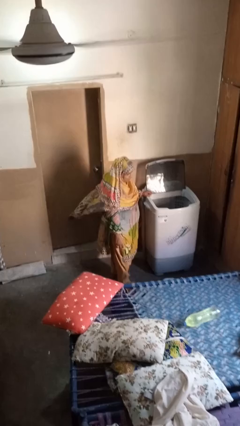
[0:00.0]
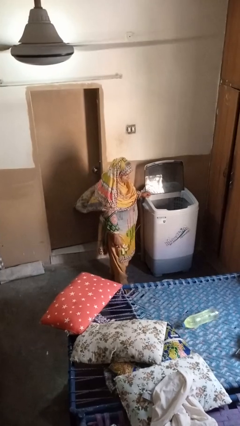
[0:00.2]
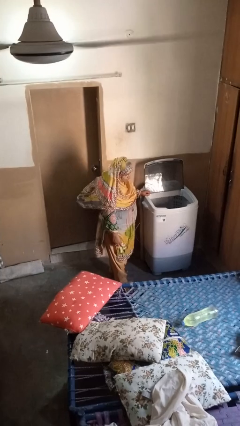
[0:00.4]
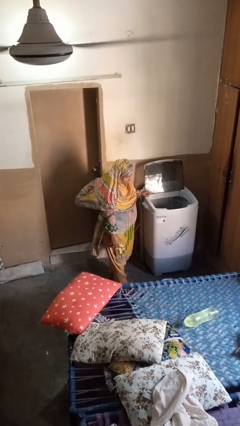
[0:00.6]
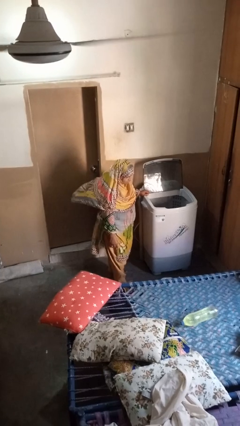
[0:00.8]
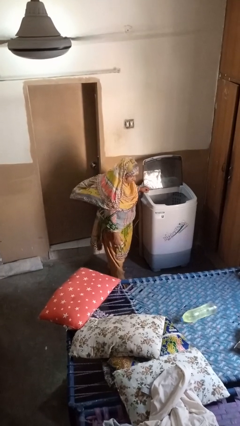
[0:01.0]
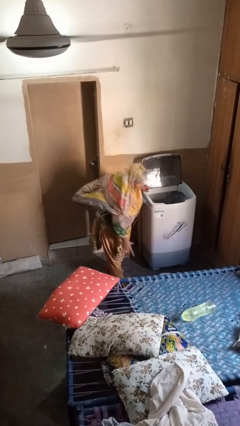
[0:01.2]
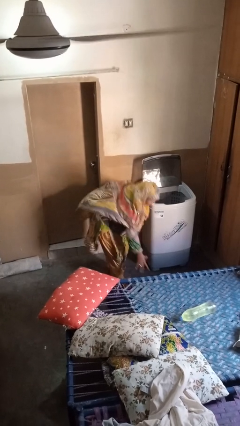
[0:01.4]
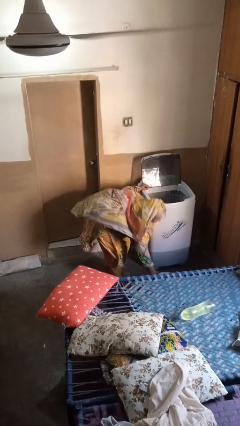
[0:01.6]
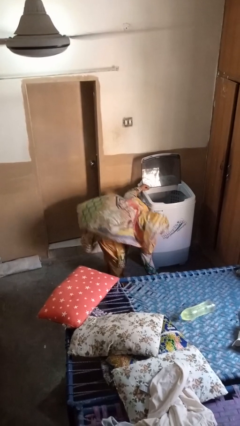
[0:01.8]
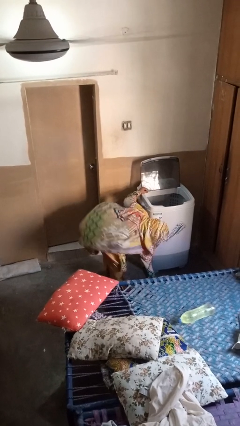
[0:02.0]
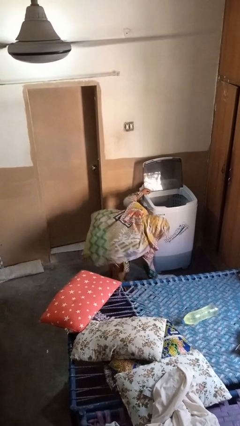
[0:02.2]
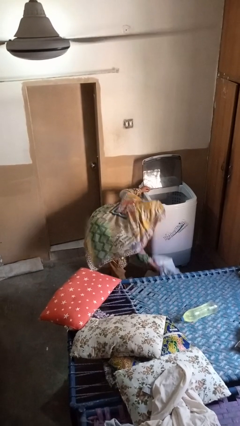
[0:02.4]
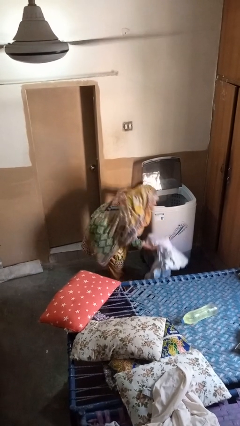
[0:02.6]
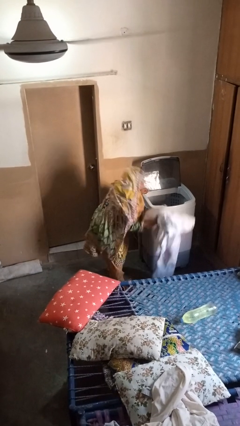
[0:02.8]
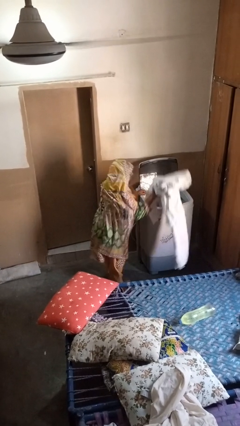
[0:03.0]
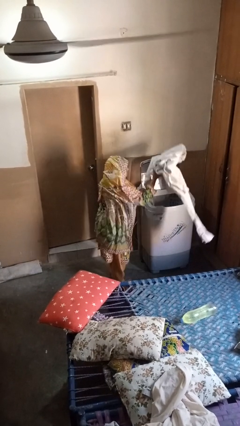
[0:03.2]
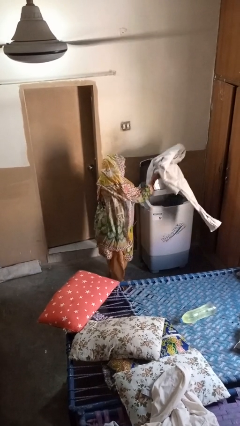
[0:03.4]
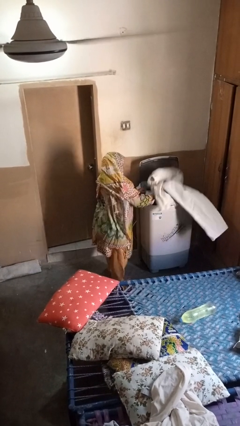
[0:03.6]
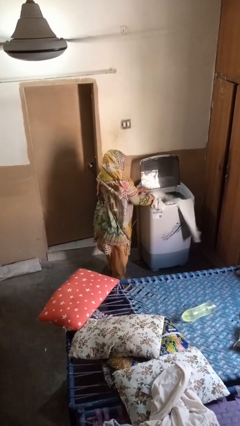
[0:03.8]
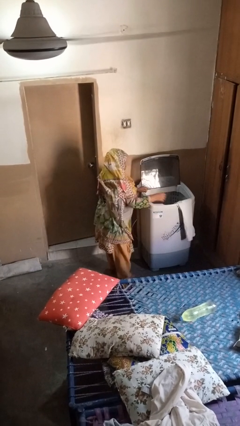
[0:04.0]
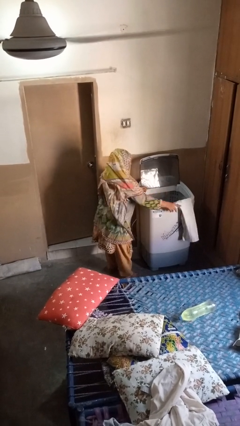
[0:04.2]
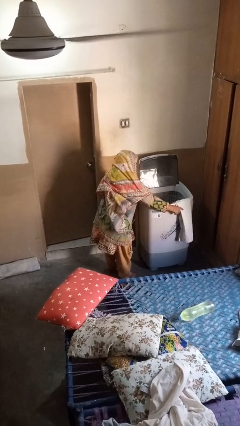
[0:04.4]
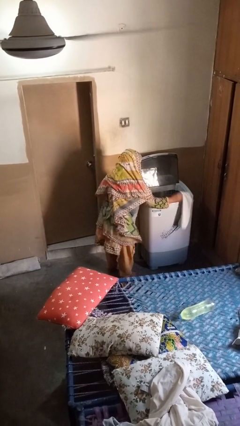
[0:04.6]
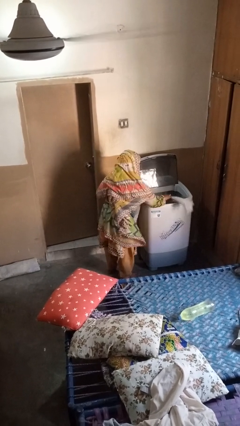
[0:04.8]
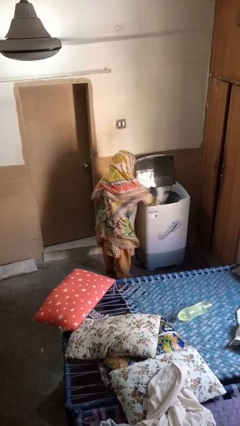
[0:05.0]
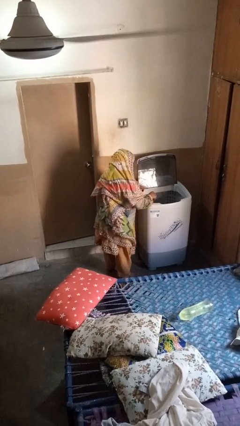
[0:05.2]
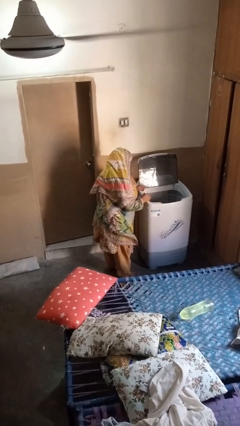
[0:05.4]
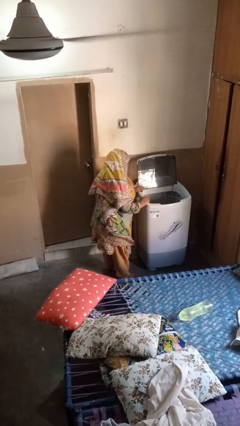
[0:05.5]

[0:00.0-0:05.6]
person loads clotheswasher

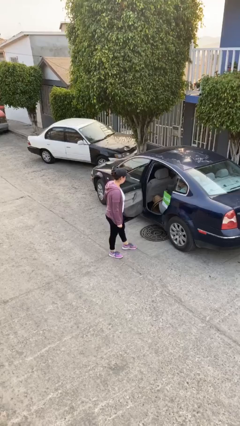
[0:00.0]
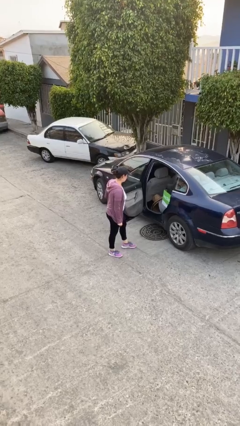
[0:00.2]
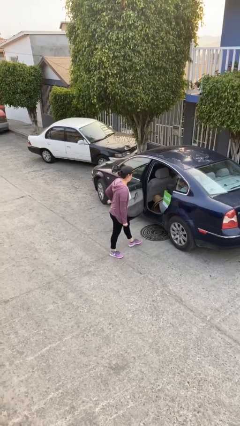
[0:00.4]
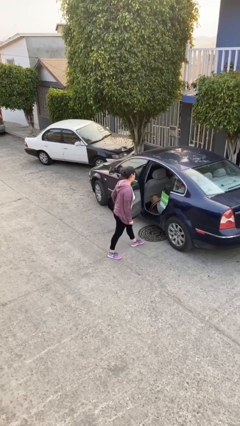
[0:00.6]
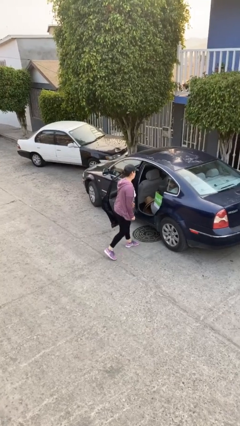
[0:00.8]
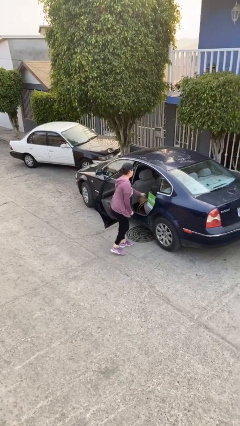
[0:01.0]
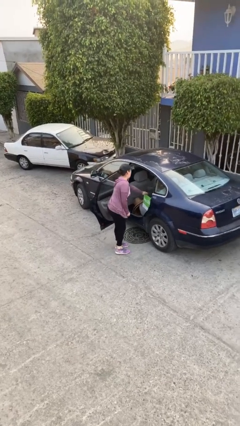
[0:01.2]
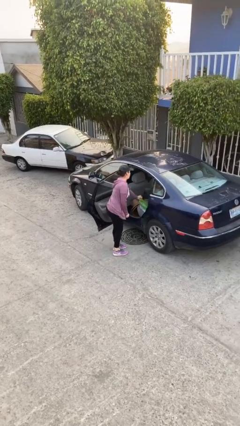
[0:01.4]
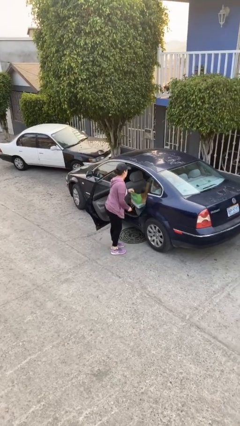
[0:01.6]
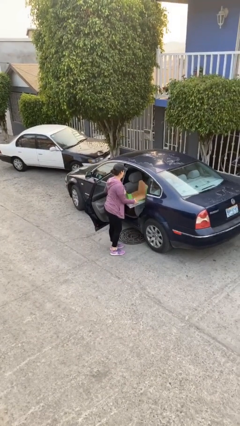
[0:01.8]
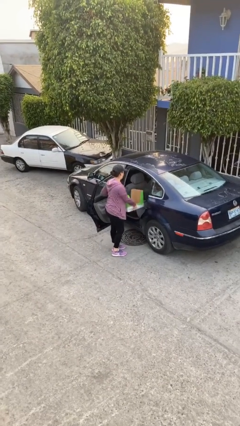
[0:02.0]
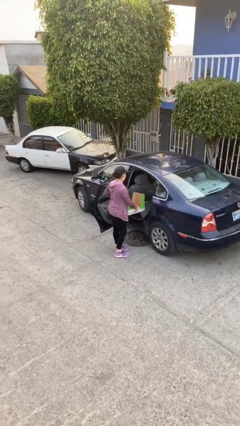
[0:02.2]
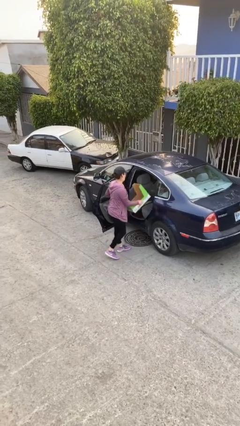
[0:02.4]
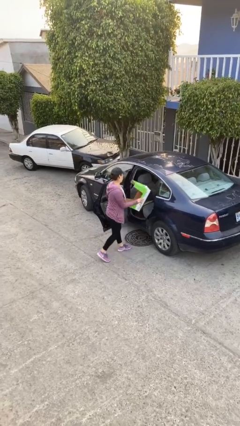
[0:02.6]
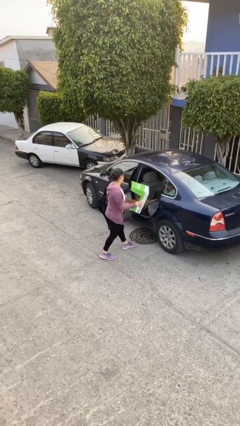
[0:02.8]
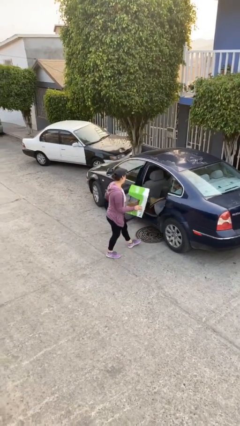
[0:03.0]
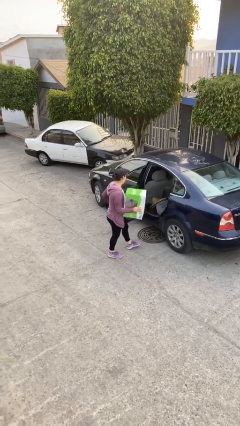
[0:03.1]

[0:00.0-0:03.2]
person unloads car

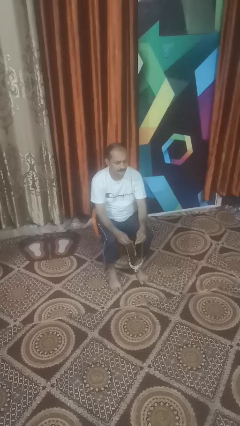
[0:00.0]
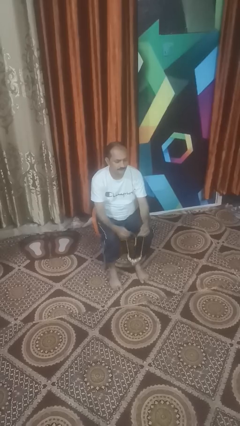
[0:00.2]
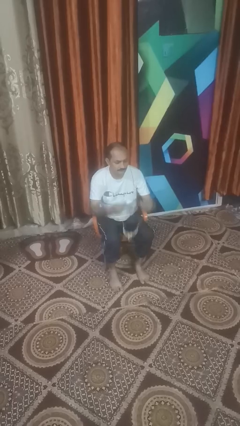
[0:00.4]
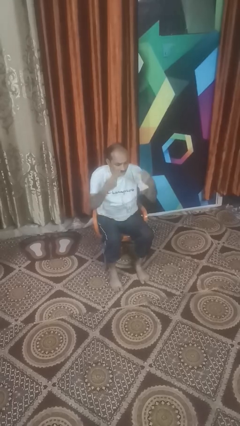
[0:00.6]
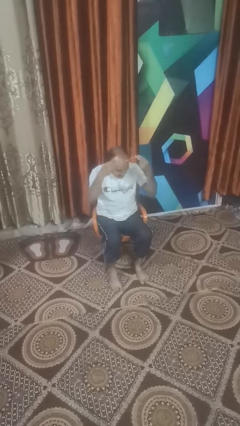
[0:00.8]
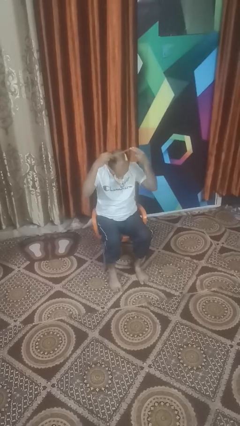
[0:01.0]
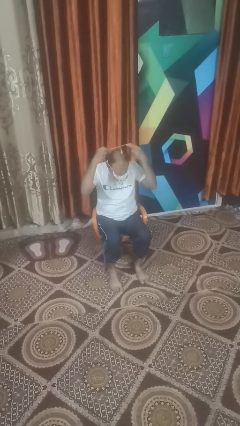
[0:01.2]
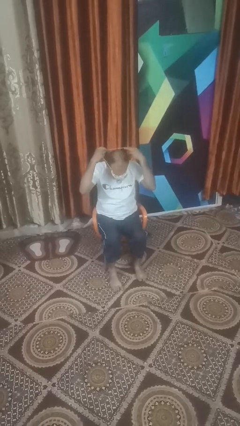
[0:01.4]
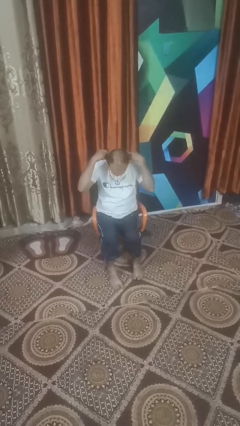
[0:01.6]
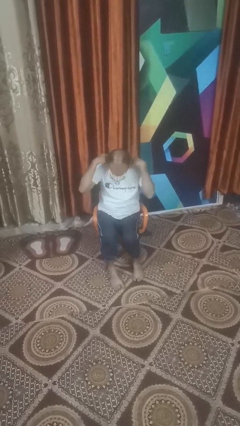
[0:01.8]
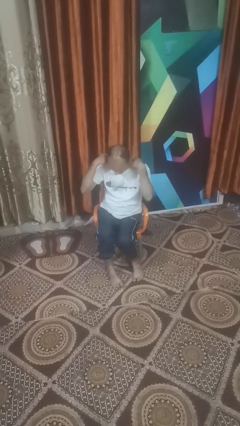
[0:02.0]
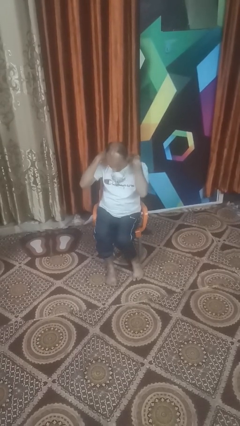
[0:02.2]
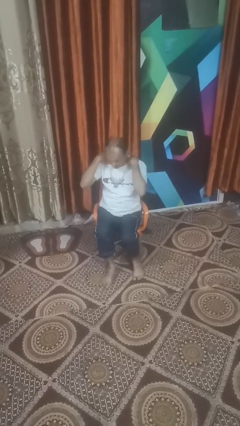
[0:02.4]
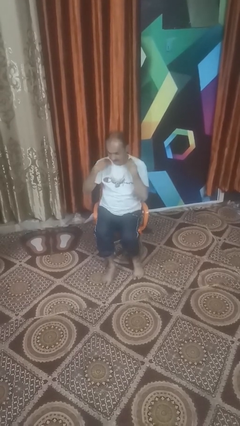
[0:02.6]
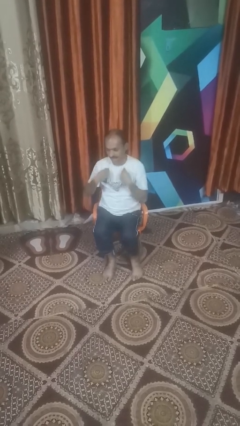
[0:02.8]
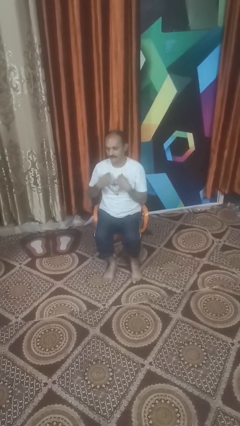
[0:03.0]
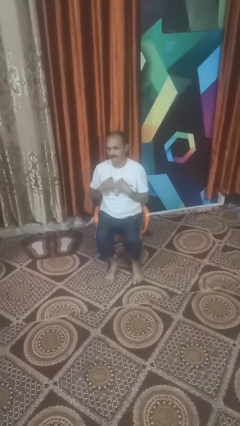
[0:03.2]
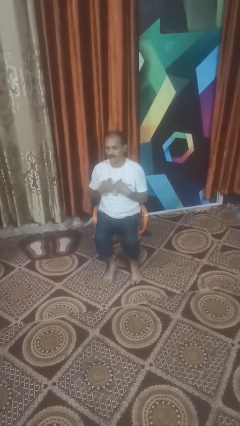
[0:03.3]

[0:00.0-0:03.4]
person puts on necklace

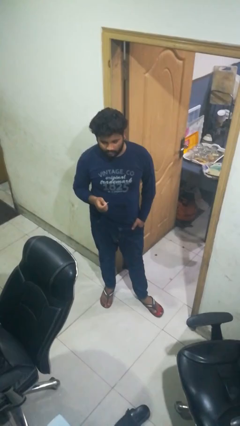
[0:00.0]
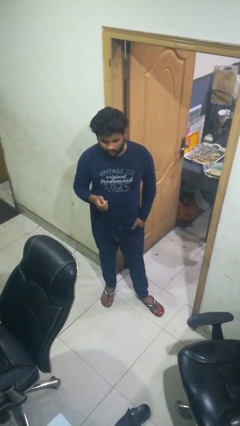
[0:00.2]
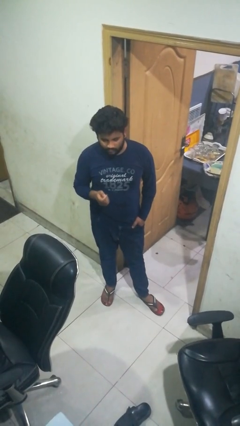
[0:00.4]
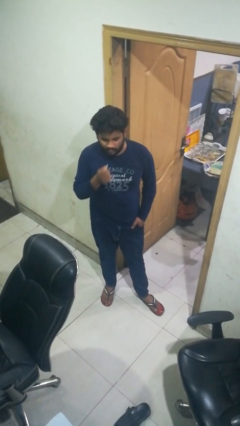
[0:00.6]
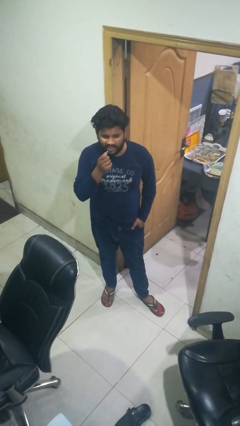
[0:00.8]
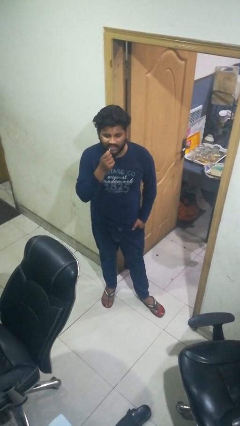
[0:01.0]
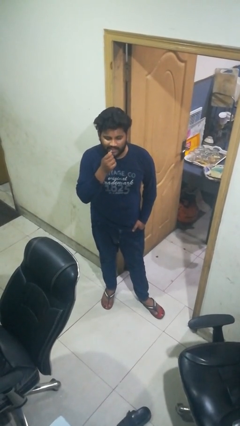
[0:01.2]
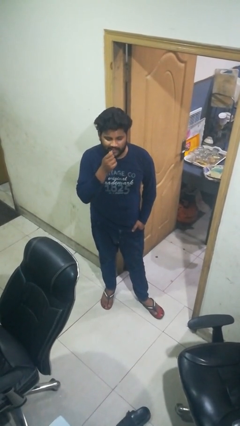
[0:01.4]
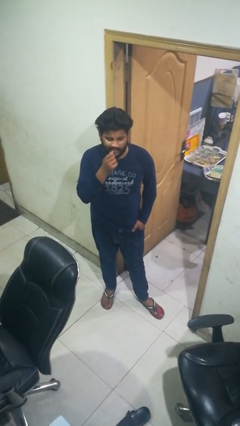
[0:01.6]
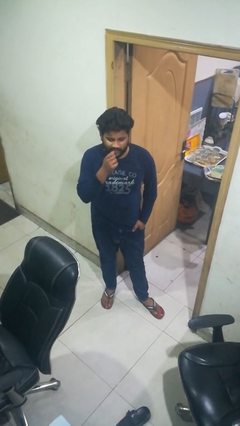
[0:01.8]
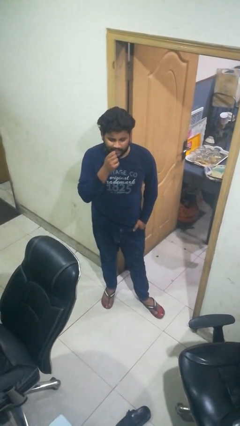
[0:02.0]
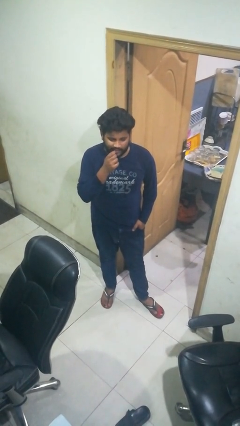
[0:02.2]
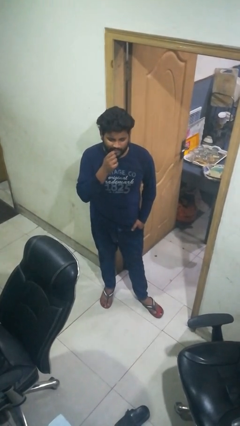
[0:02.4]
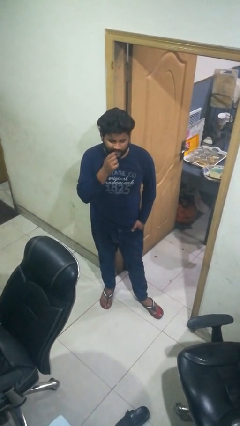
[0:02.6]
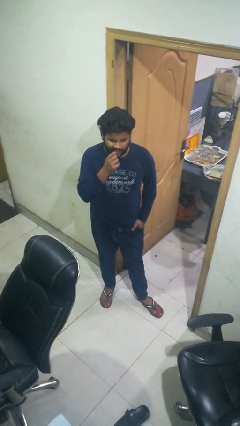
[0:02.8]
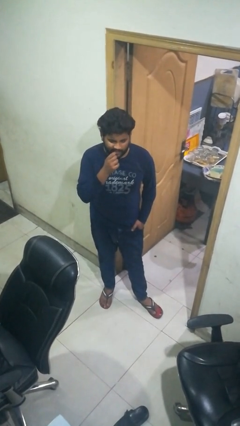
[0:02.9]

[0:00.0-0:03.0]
person flosses

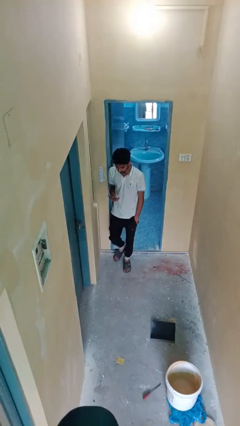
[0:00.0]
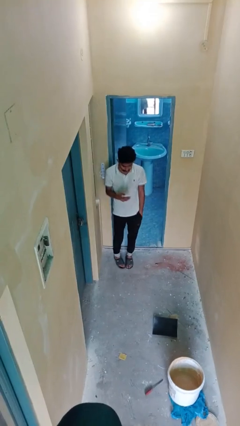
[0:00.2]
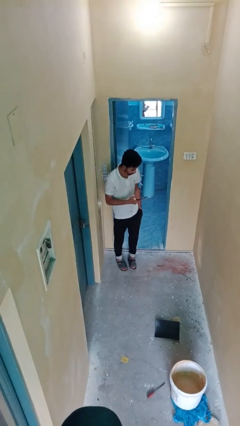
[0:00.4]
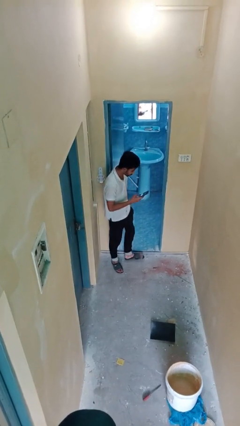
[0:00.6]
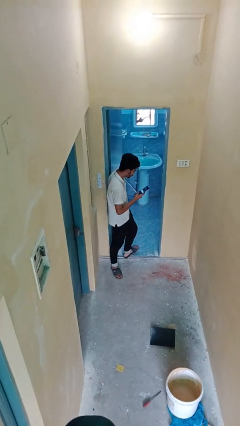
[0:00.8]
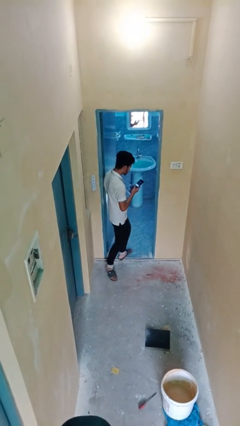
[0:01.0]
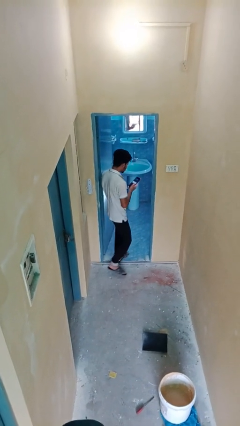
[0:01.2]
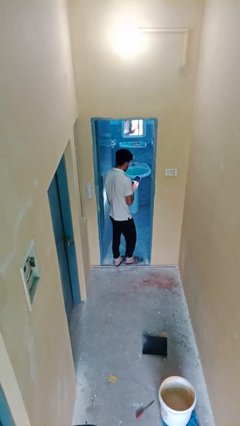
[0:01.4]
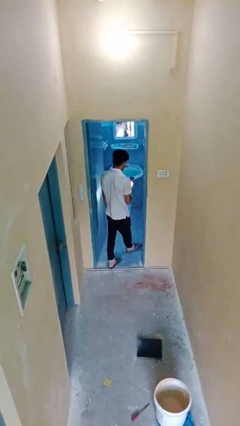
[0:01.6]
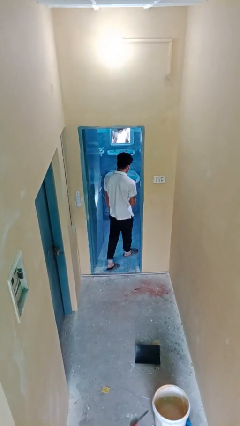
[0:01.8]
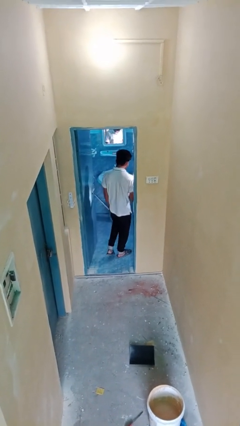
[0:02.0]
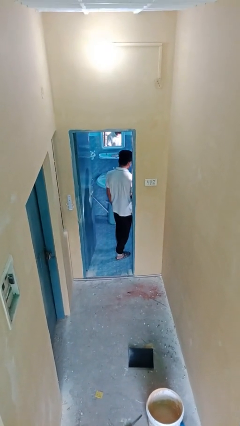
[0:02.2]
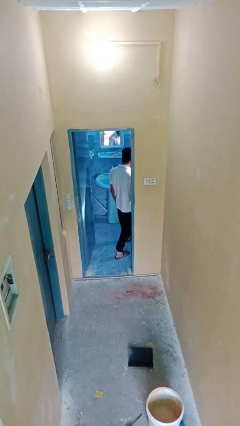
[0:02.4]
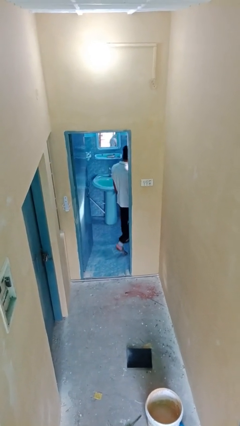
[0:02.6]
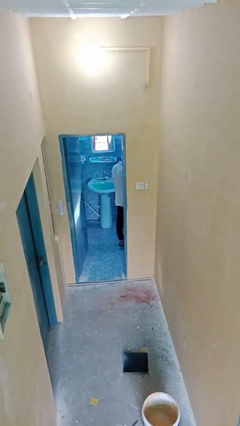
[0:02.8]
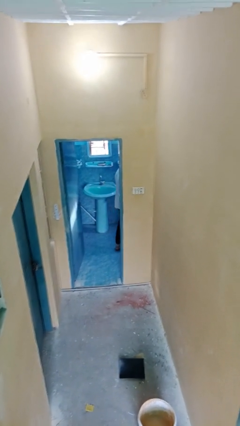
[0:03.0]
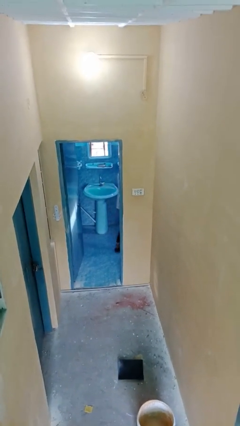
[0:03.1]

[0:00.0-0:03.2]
person exits scene through structure
